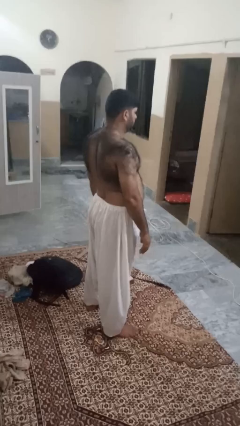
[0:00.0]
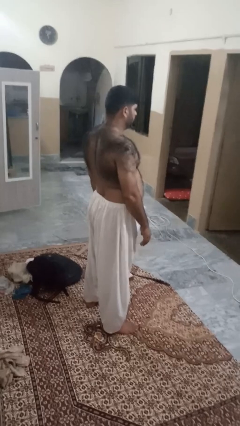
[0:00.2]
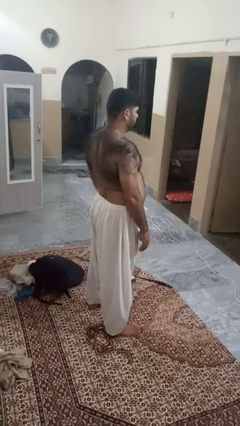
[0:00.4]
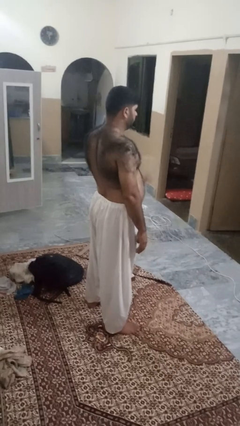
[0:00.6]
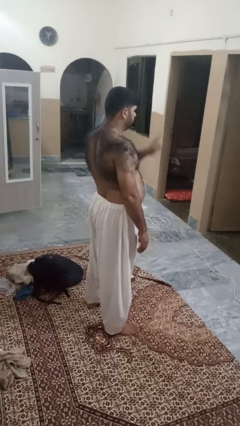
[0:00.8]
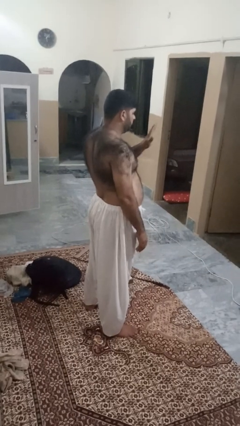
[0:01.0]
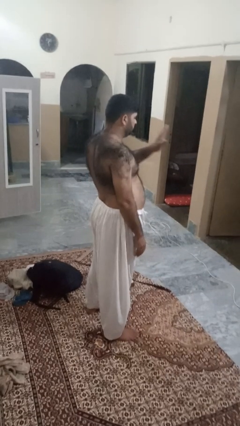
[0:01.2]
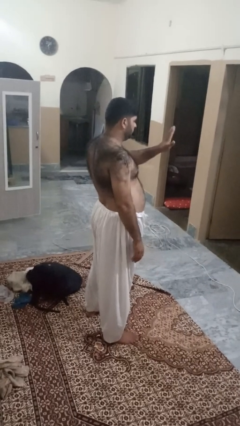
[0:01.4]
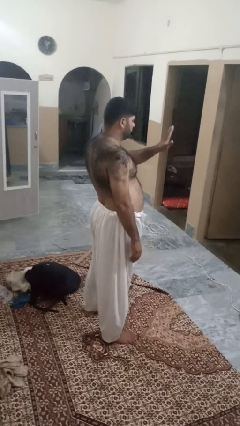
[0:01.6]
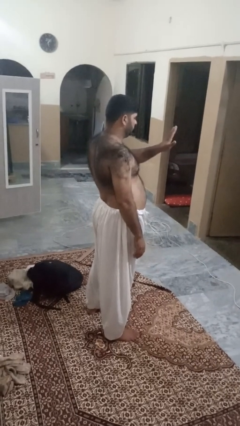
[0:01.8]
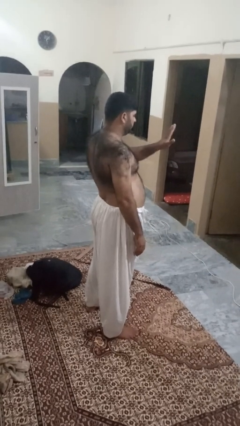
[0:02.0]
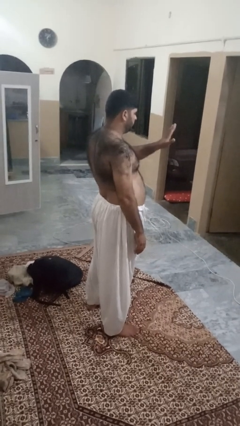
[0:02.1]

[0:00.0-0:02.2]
person gestures stop

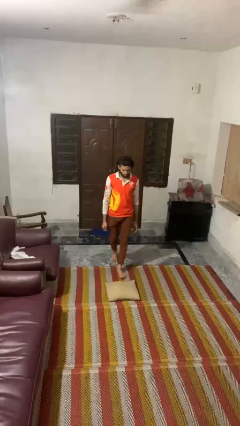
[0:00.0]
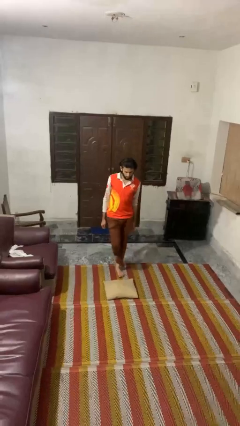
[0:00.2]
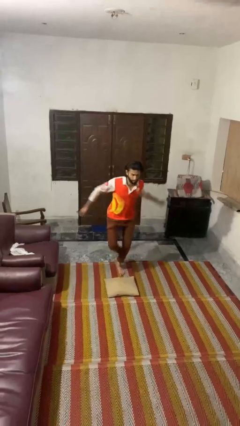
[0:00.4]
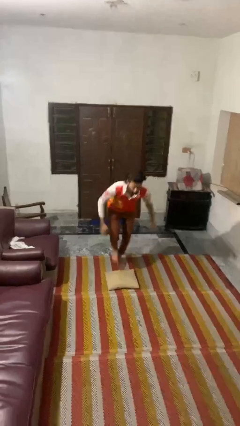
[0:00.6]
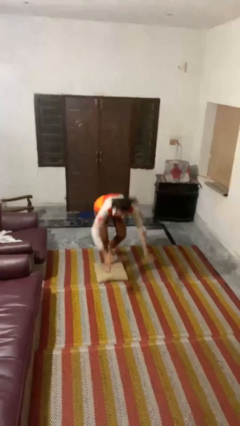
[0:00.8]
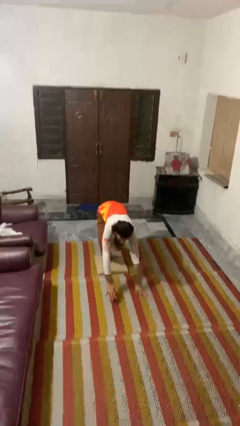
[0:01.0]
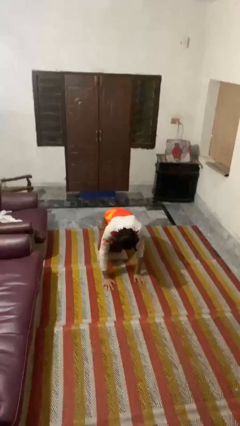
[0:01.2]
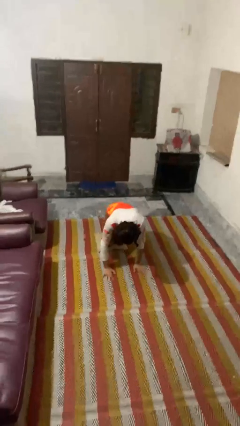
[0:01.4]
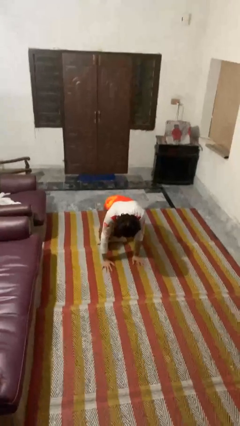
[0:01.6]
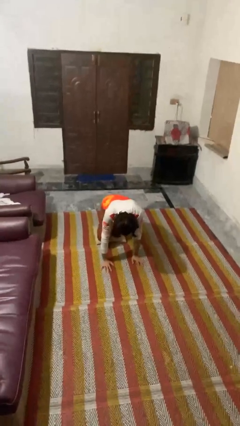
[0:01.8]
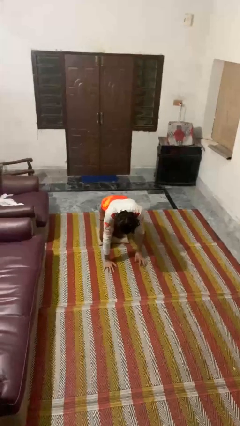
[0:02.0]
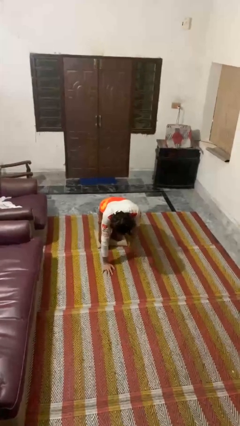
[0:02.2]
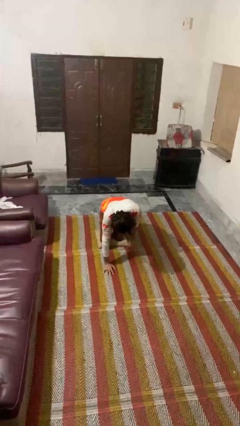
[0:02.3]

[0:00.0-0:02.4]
person trips on object on floor

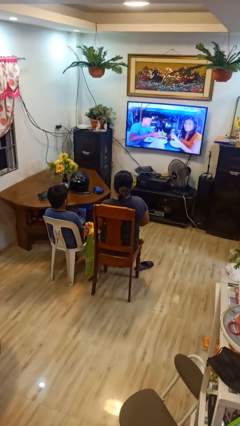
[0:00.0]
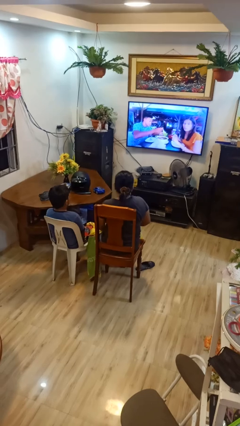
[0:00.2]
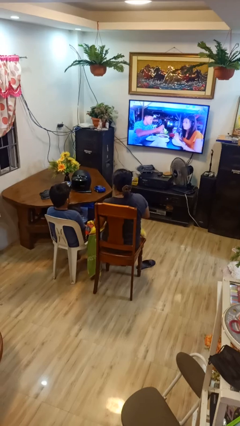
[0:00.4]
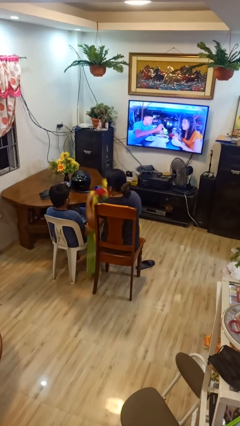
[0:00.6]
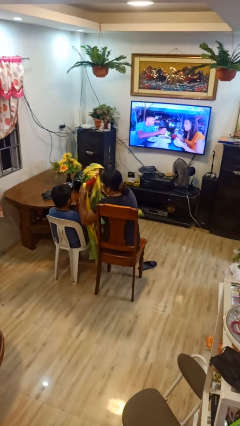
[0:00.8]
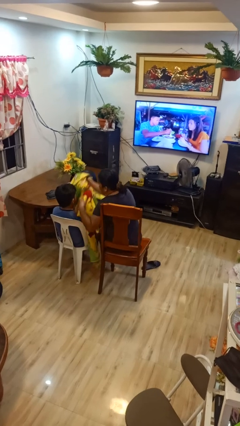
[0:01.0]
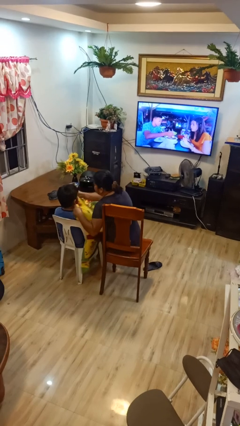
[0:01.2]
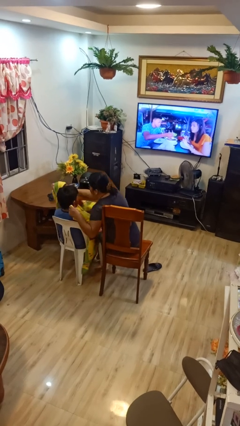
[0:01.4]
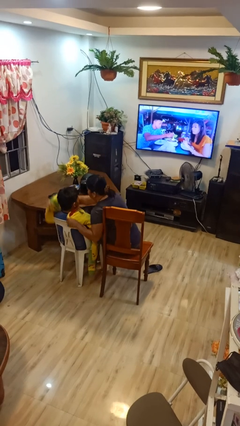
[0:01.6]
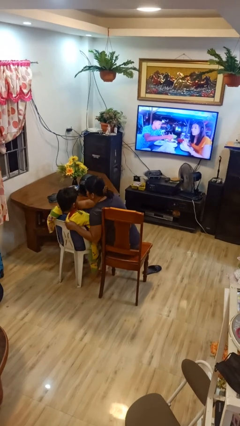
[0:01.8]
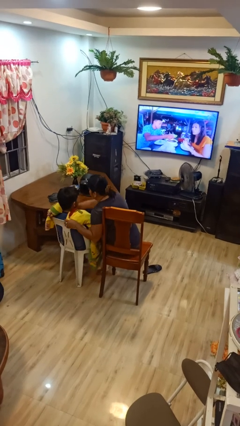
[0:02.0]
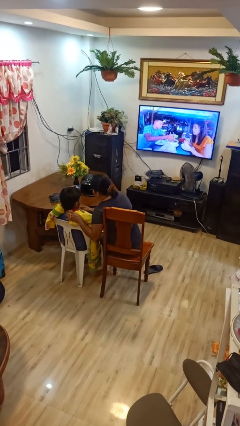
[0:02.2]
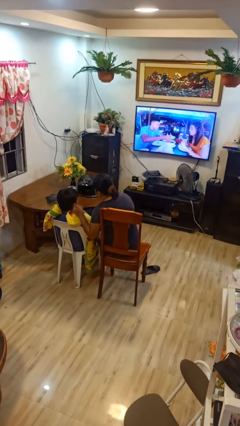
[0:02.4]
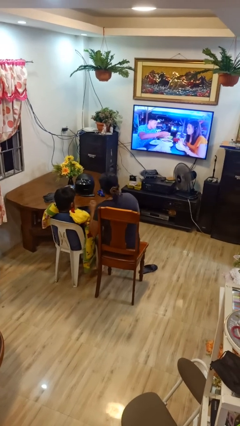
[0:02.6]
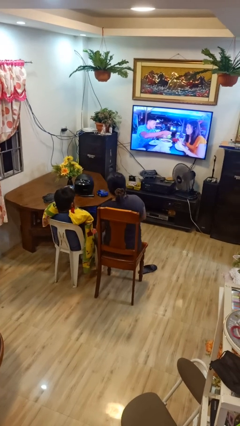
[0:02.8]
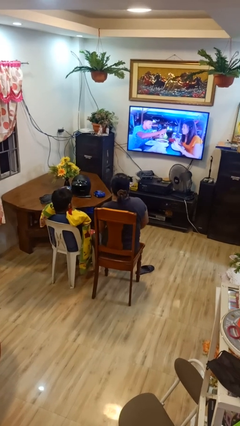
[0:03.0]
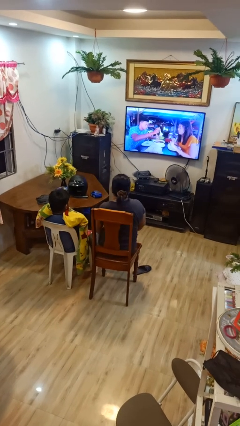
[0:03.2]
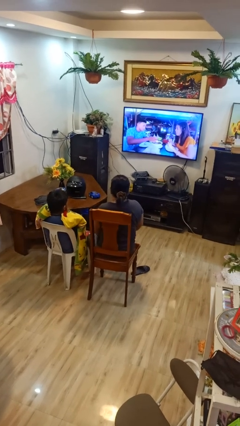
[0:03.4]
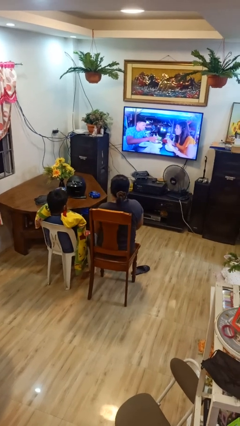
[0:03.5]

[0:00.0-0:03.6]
person covers friend with blanket

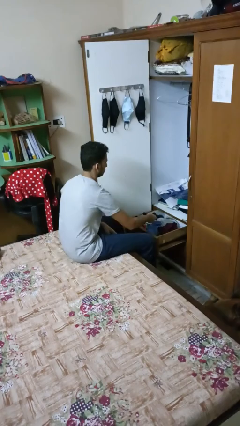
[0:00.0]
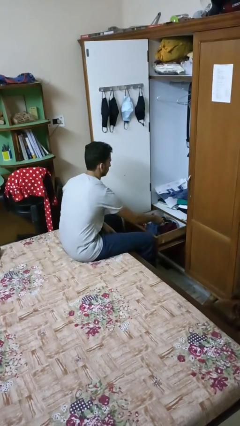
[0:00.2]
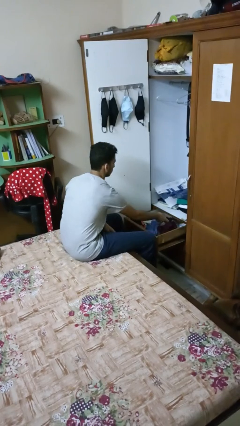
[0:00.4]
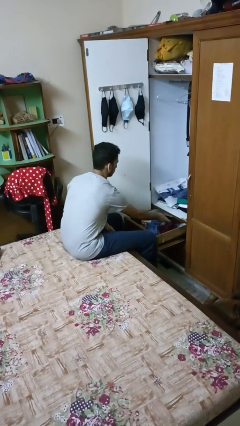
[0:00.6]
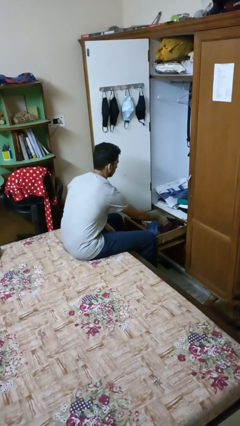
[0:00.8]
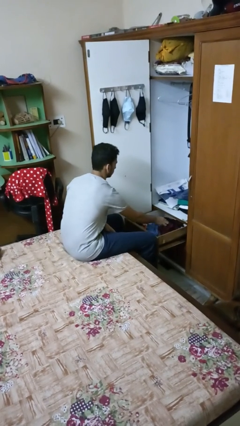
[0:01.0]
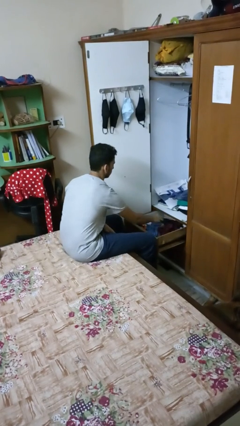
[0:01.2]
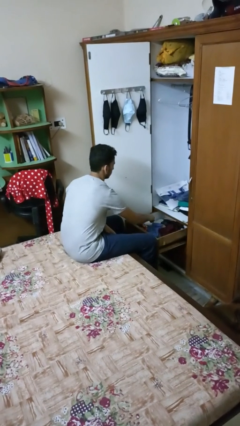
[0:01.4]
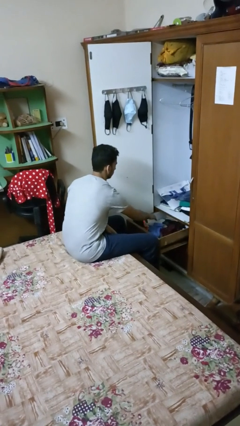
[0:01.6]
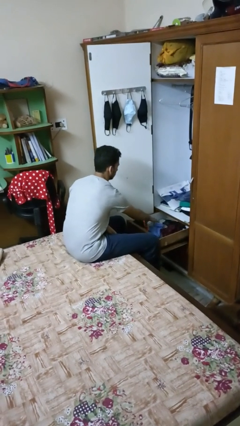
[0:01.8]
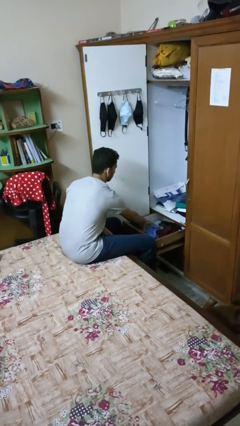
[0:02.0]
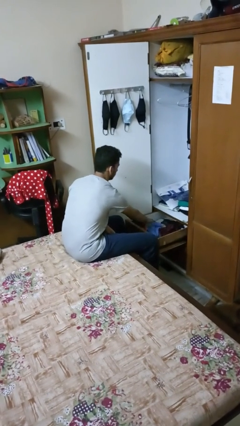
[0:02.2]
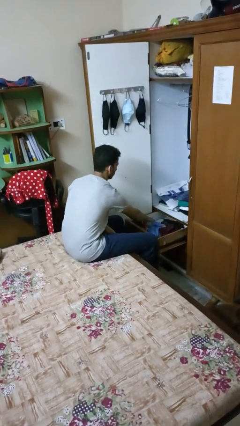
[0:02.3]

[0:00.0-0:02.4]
person puts clothes into dresser

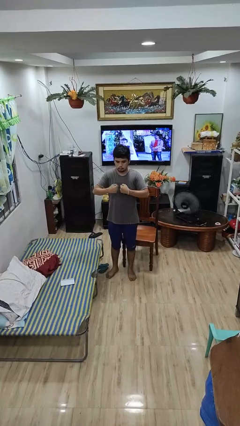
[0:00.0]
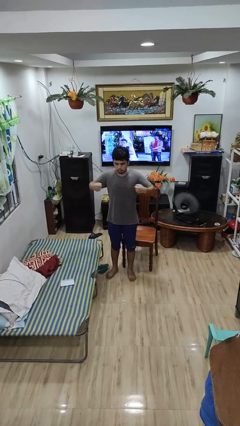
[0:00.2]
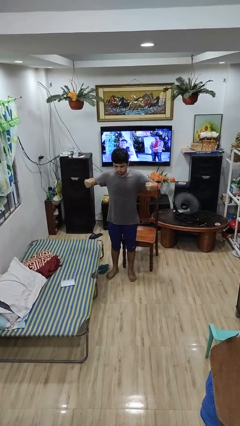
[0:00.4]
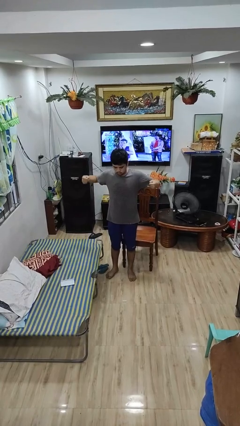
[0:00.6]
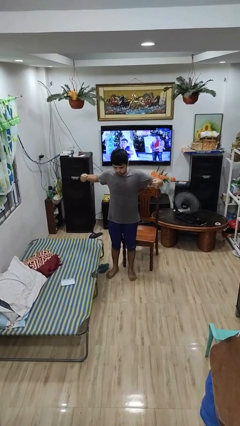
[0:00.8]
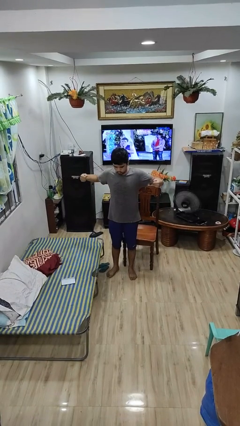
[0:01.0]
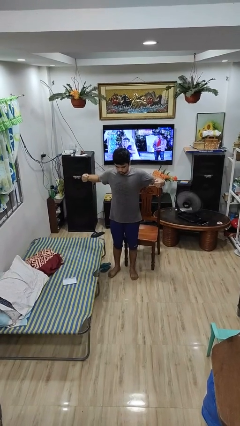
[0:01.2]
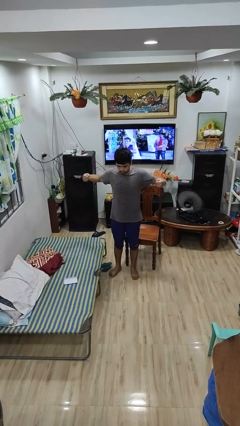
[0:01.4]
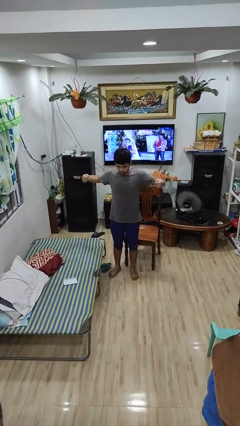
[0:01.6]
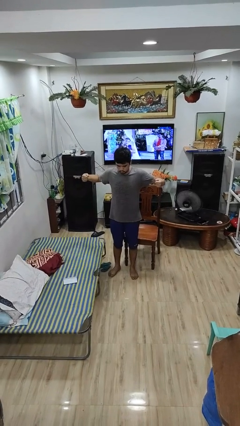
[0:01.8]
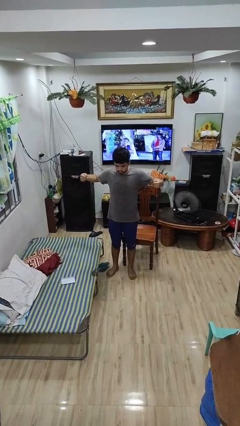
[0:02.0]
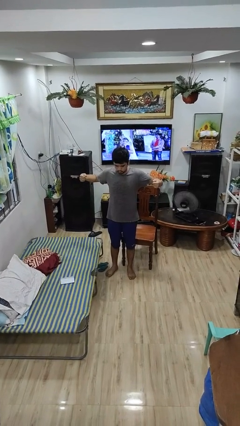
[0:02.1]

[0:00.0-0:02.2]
person gestures zoom in

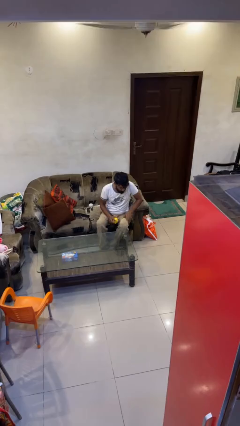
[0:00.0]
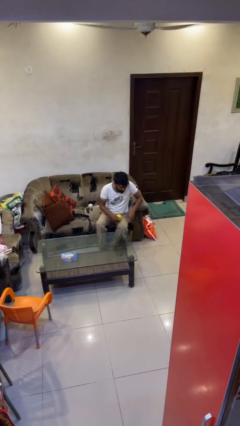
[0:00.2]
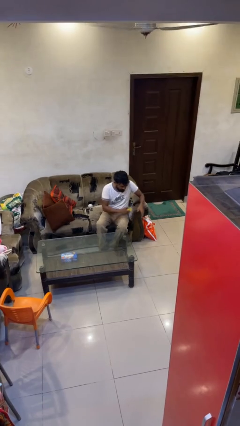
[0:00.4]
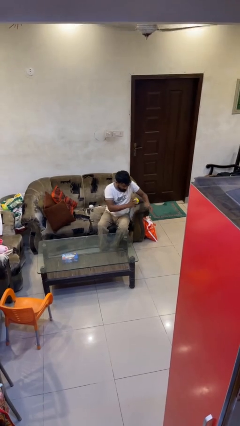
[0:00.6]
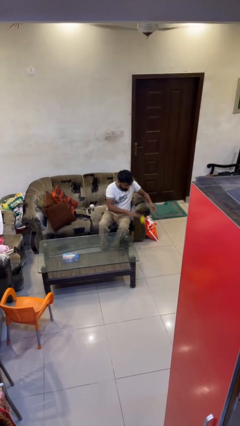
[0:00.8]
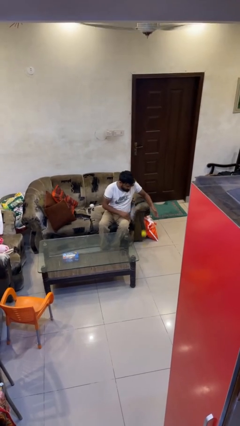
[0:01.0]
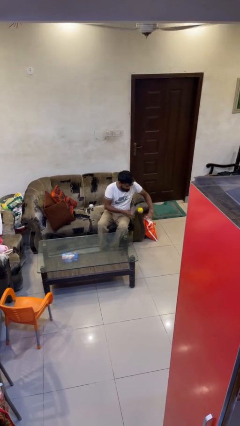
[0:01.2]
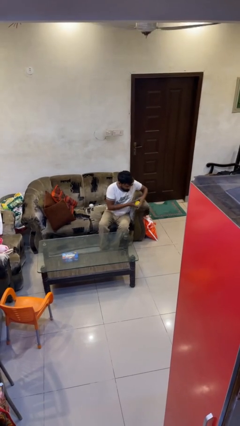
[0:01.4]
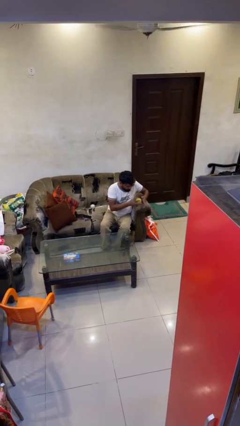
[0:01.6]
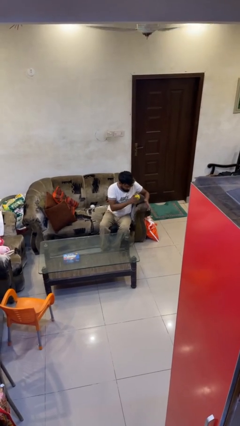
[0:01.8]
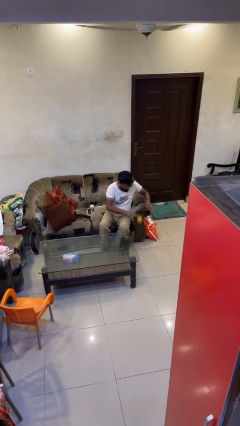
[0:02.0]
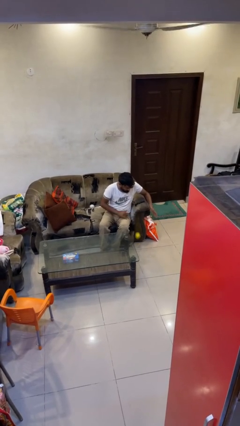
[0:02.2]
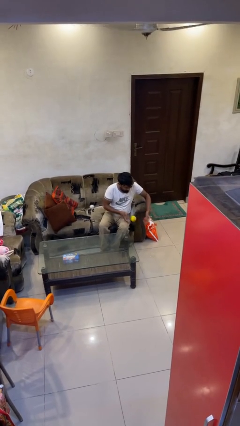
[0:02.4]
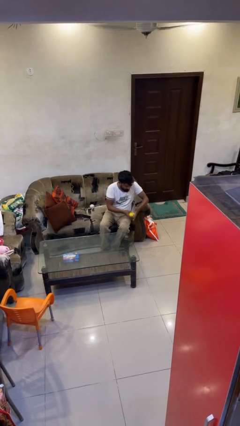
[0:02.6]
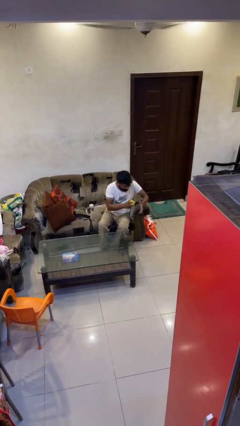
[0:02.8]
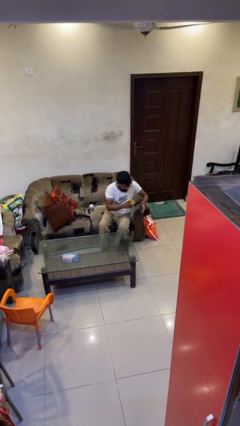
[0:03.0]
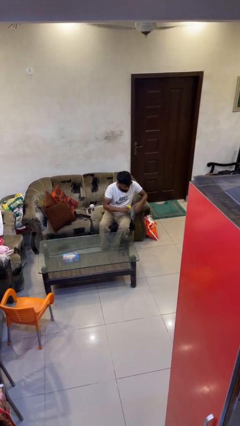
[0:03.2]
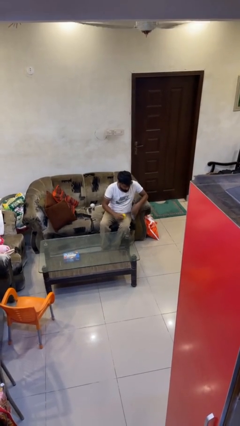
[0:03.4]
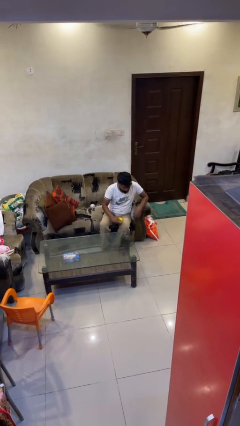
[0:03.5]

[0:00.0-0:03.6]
person bounces ball on floor

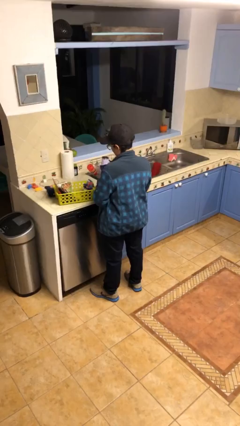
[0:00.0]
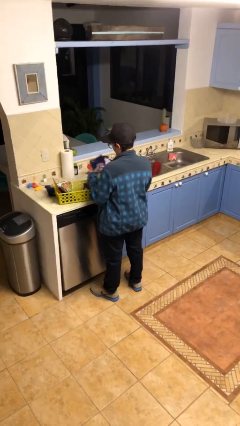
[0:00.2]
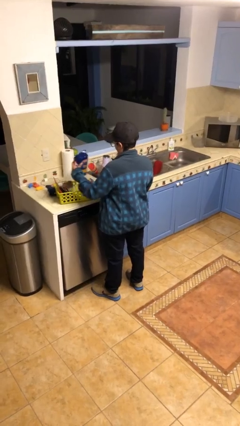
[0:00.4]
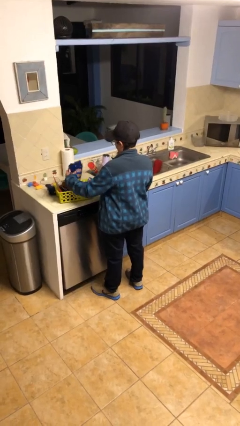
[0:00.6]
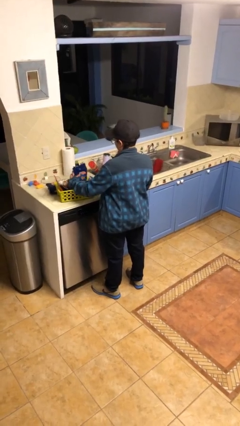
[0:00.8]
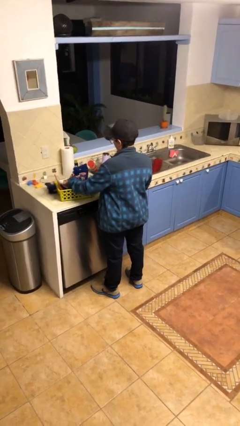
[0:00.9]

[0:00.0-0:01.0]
person puts object into basket
